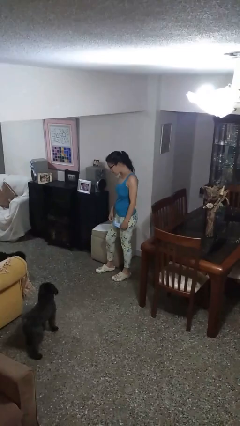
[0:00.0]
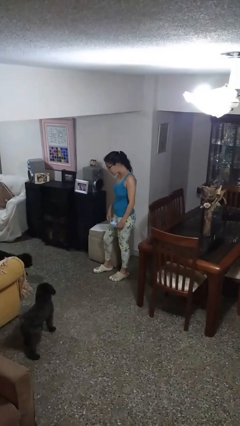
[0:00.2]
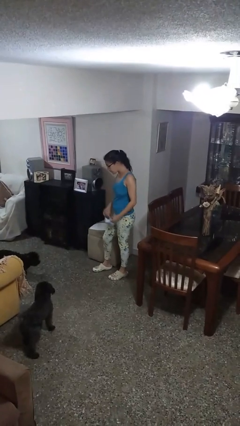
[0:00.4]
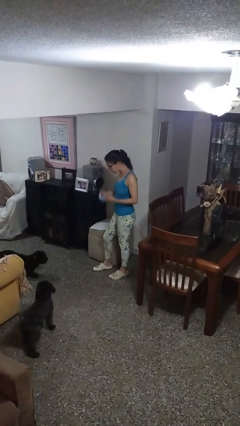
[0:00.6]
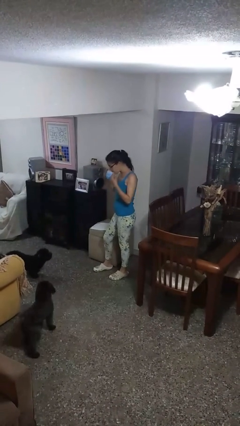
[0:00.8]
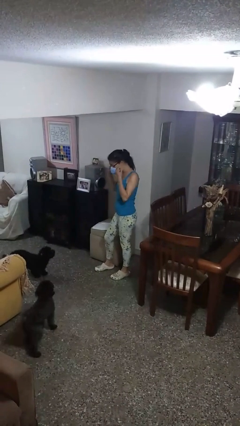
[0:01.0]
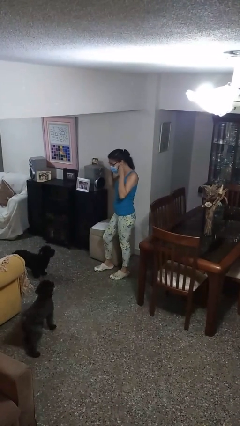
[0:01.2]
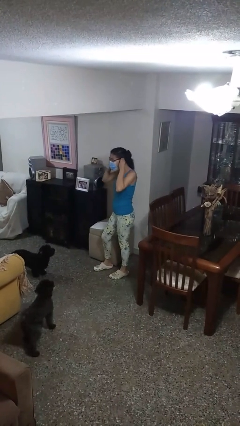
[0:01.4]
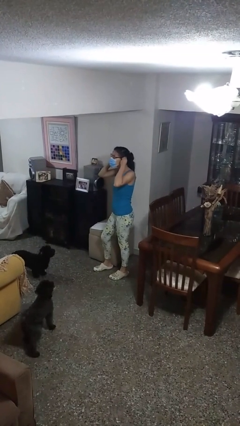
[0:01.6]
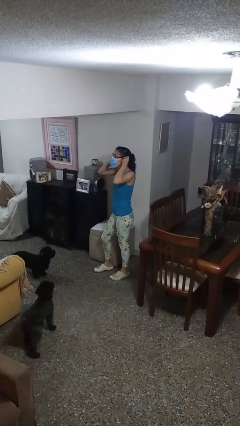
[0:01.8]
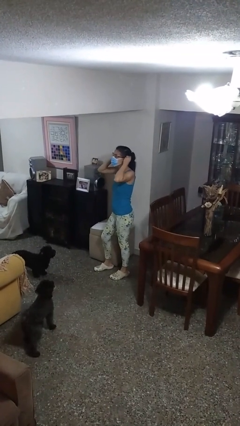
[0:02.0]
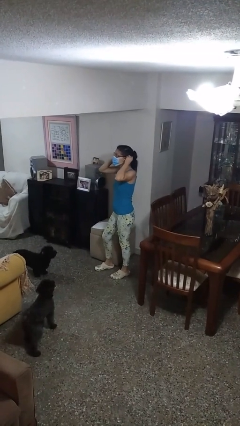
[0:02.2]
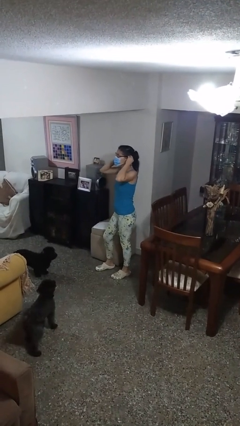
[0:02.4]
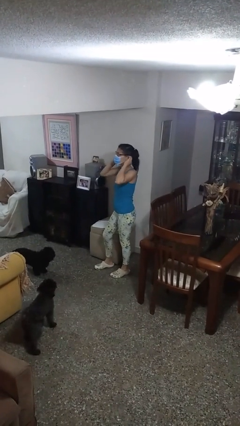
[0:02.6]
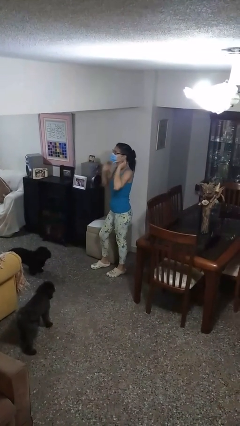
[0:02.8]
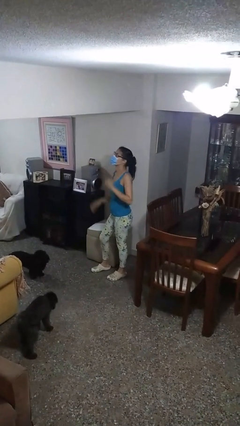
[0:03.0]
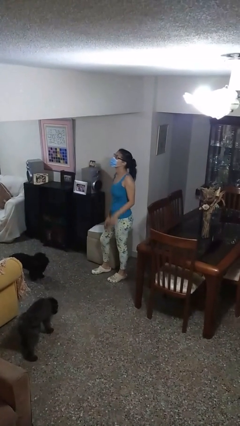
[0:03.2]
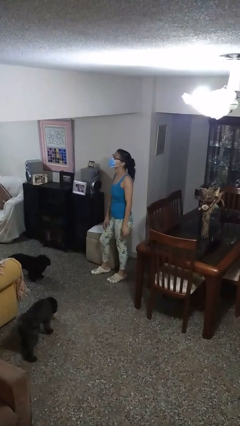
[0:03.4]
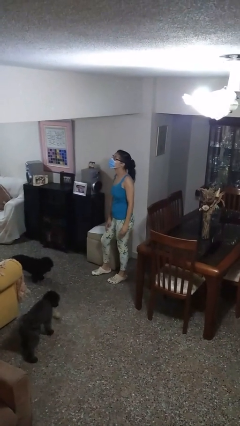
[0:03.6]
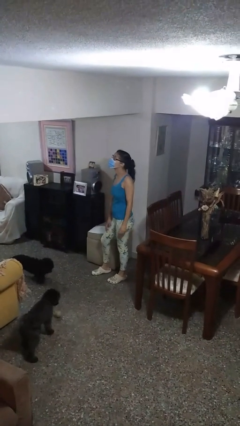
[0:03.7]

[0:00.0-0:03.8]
person puts on facemask

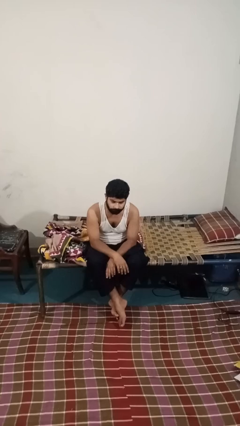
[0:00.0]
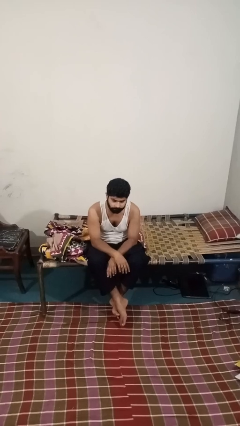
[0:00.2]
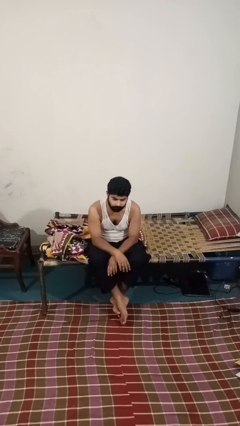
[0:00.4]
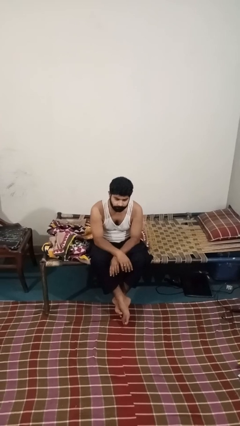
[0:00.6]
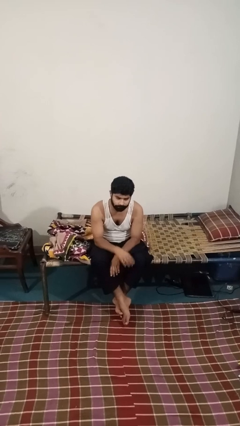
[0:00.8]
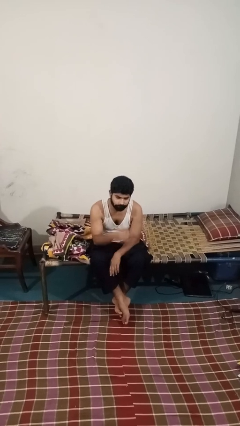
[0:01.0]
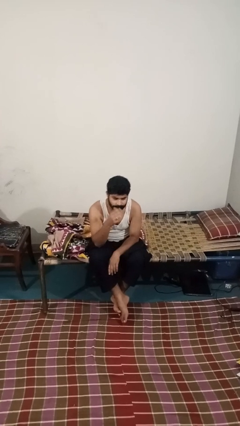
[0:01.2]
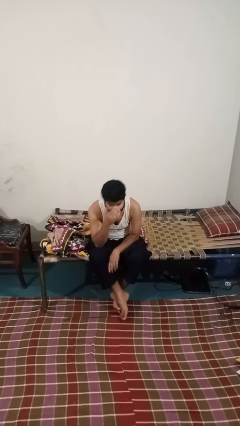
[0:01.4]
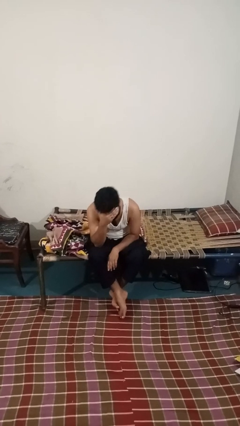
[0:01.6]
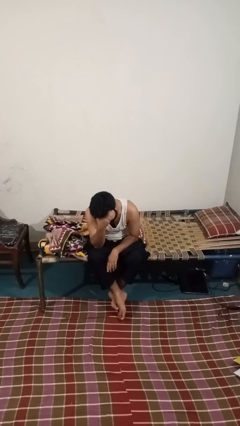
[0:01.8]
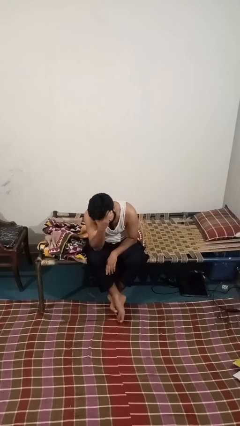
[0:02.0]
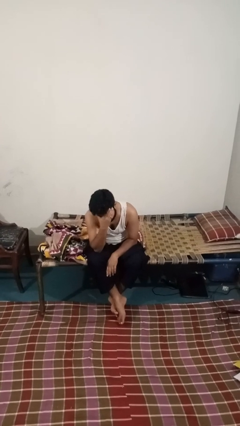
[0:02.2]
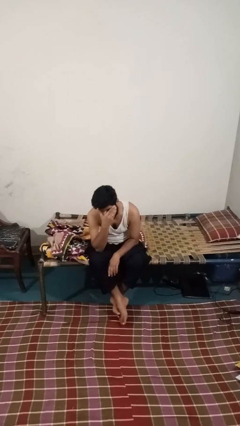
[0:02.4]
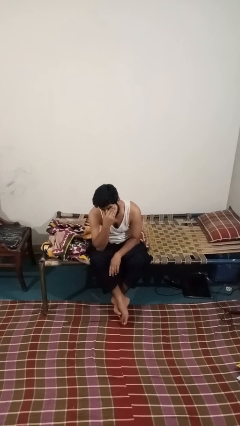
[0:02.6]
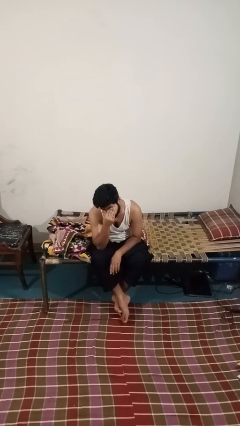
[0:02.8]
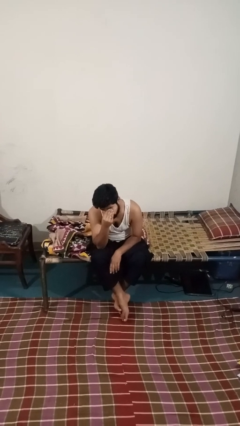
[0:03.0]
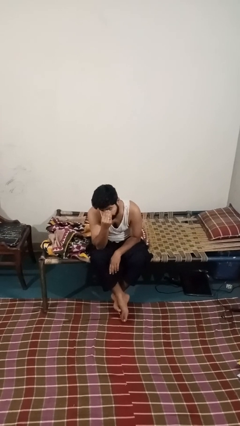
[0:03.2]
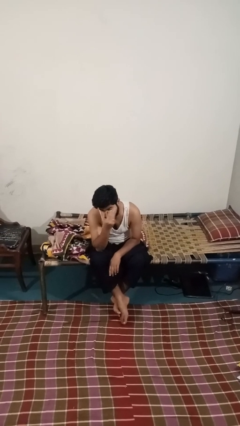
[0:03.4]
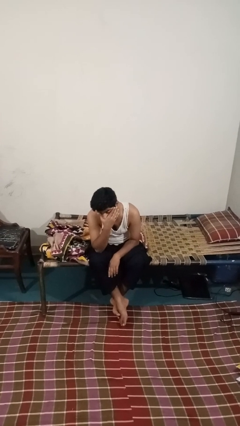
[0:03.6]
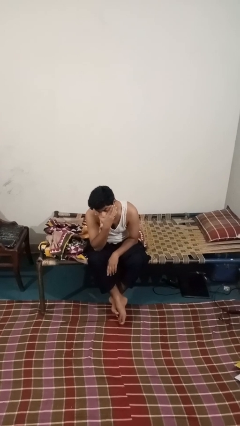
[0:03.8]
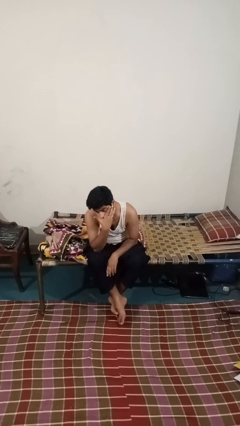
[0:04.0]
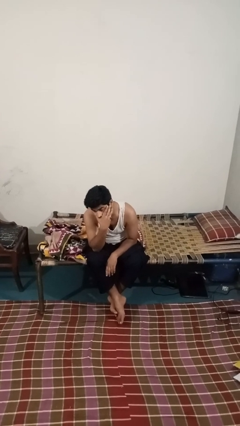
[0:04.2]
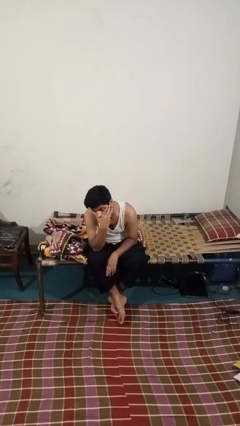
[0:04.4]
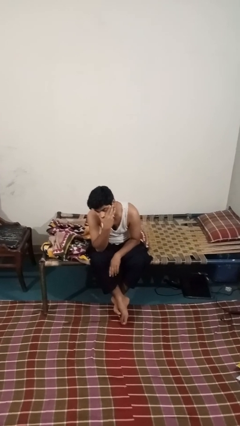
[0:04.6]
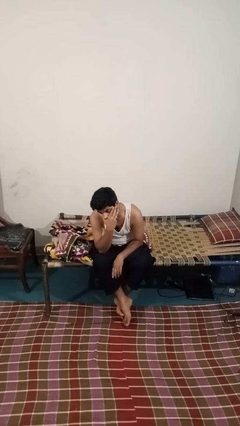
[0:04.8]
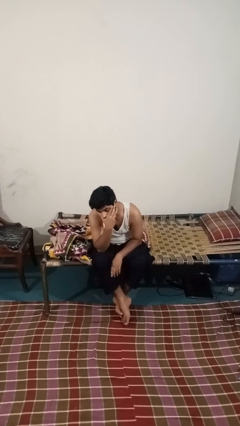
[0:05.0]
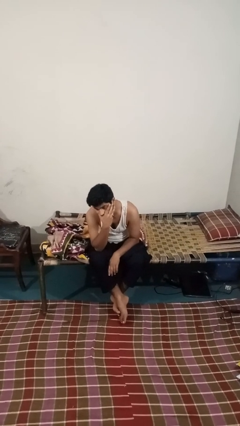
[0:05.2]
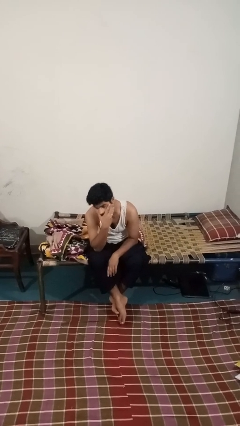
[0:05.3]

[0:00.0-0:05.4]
person covers face with hands

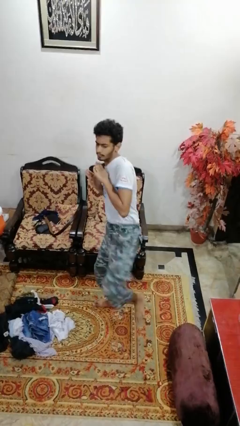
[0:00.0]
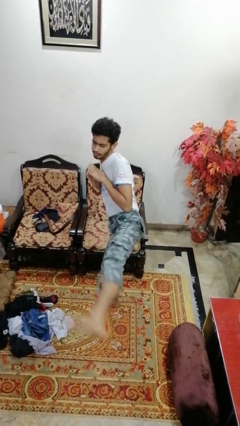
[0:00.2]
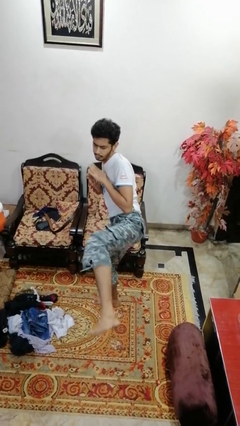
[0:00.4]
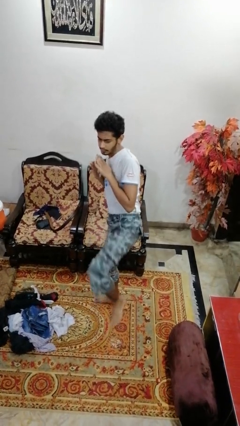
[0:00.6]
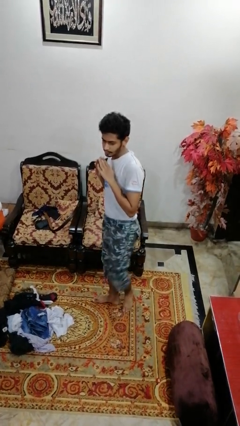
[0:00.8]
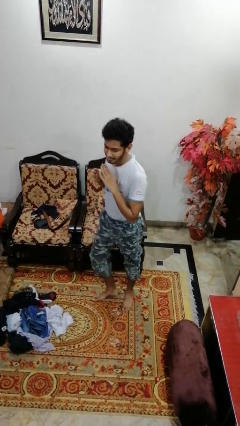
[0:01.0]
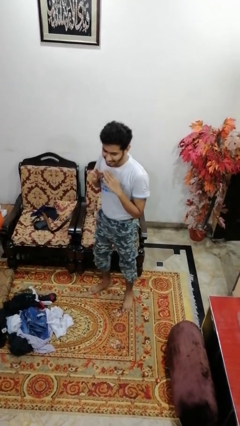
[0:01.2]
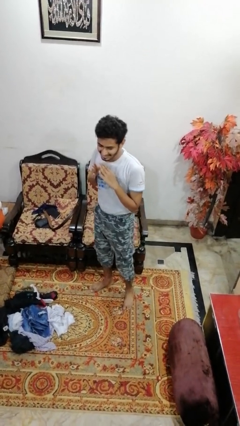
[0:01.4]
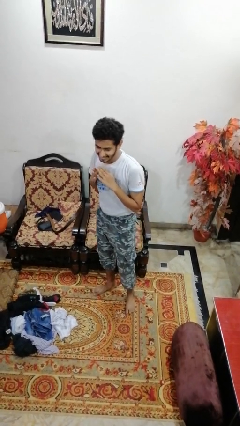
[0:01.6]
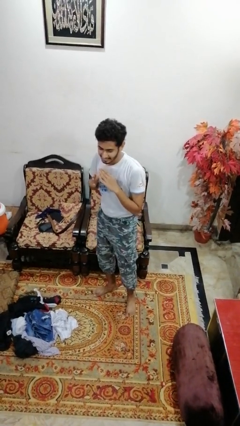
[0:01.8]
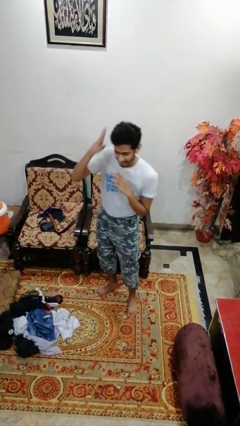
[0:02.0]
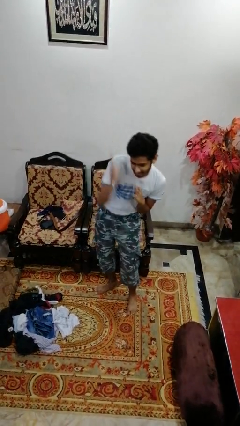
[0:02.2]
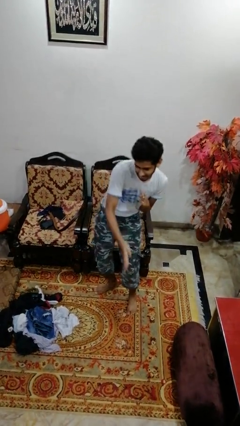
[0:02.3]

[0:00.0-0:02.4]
person karate kicks

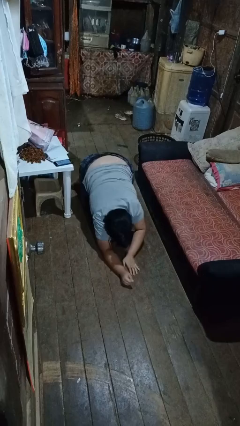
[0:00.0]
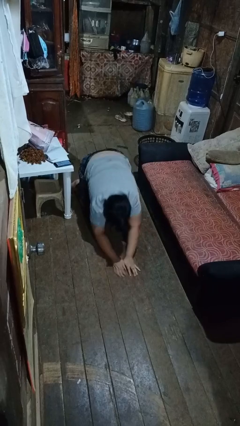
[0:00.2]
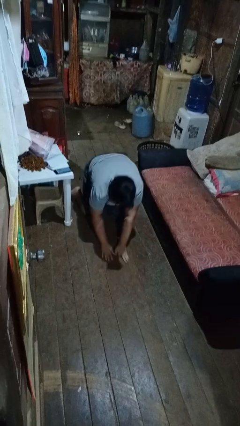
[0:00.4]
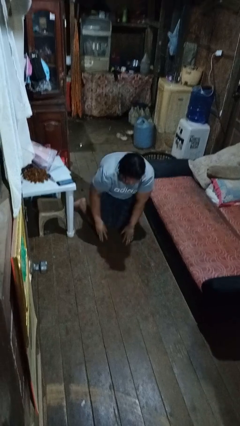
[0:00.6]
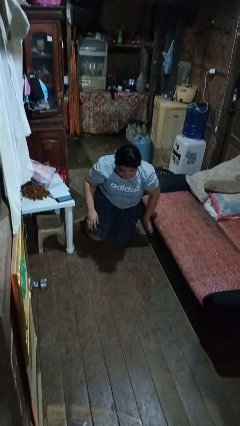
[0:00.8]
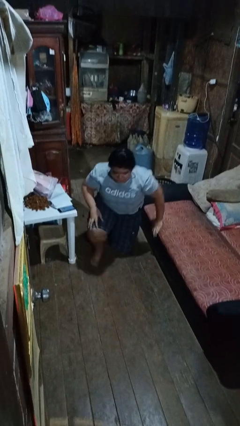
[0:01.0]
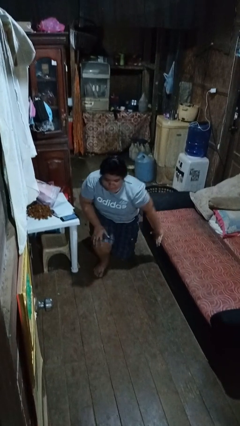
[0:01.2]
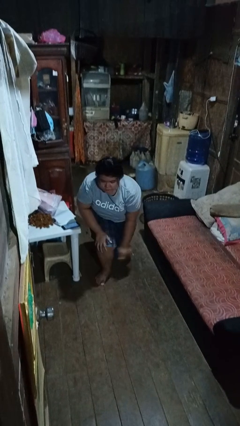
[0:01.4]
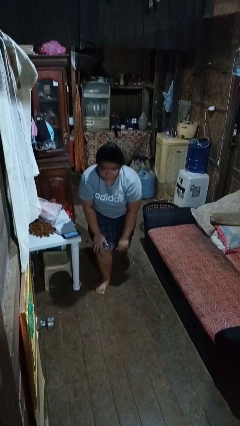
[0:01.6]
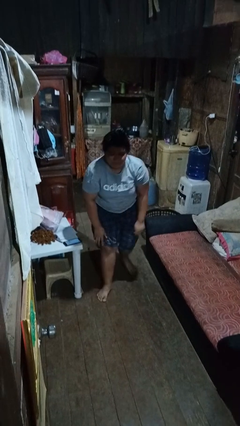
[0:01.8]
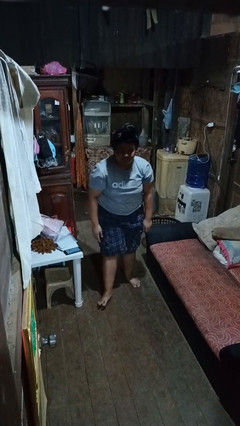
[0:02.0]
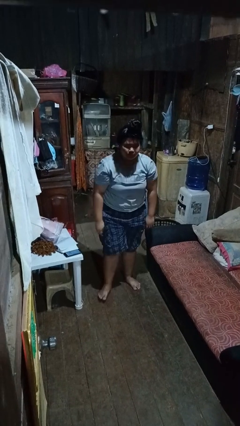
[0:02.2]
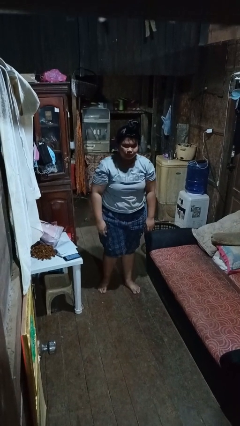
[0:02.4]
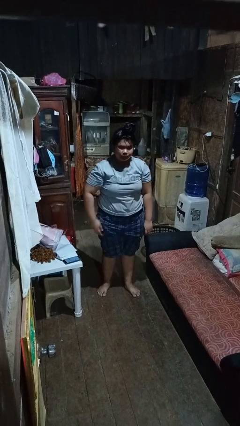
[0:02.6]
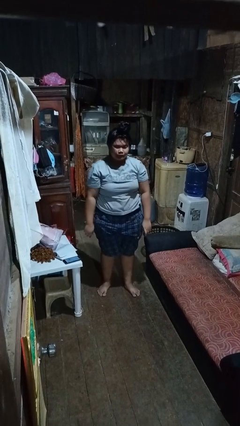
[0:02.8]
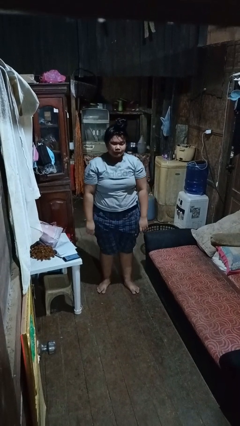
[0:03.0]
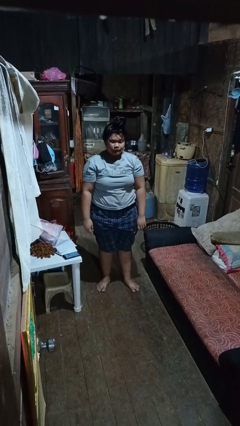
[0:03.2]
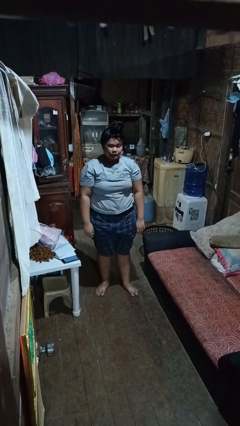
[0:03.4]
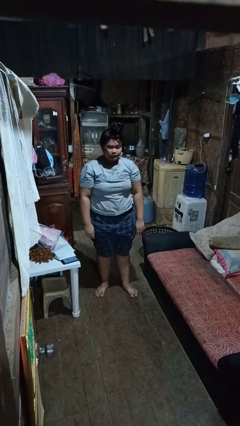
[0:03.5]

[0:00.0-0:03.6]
person stands up from floor

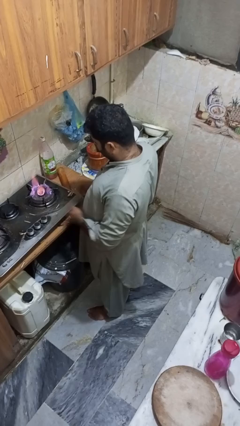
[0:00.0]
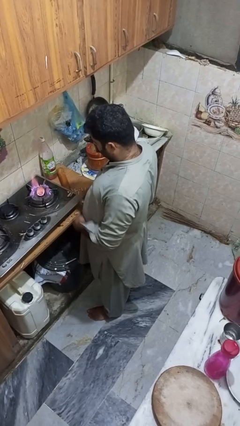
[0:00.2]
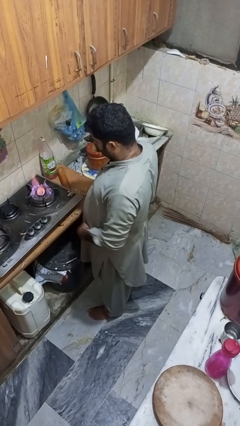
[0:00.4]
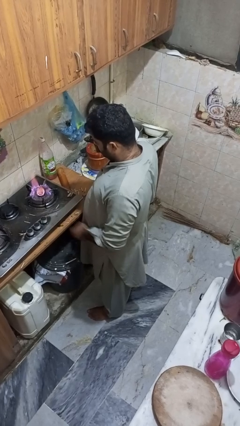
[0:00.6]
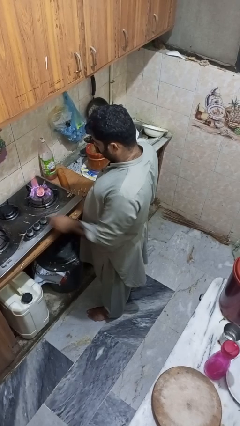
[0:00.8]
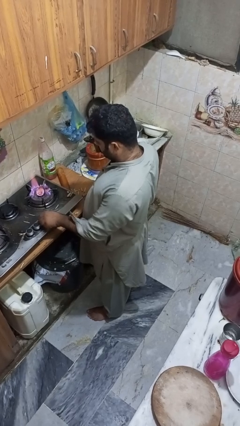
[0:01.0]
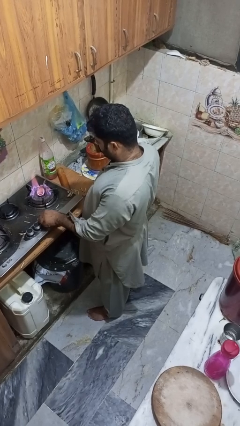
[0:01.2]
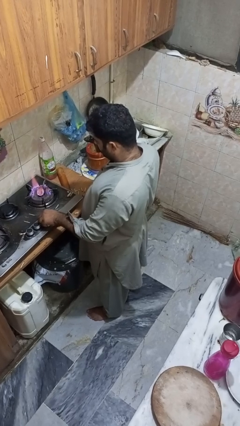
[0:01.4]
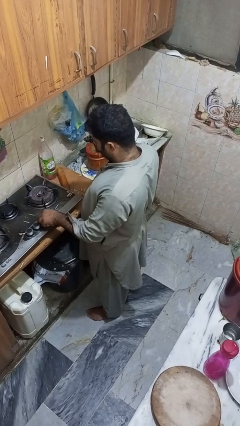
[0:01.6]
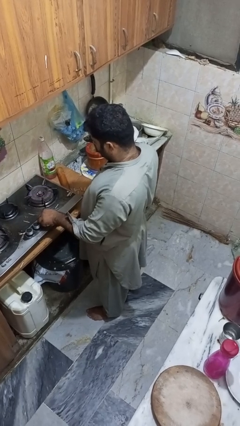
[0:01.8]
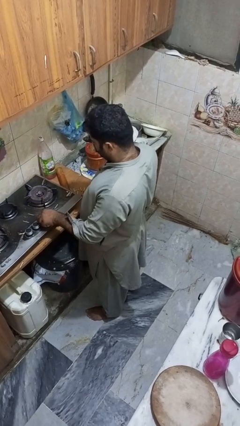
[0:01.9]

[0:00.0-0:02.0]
person turns off stovetop
